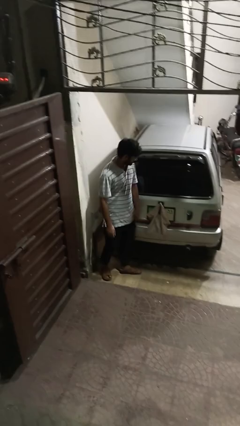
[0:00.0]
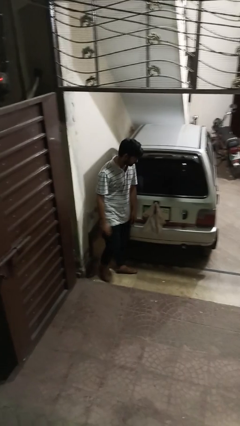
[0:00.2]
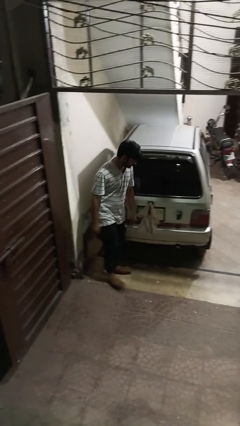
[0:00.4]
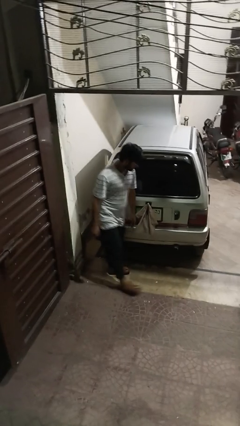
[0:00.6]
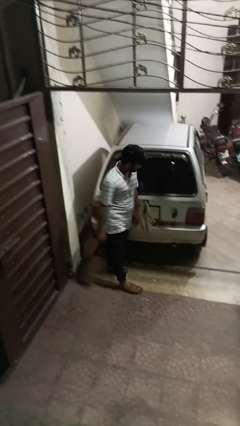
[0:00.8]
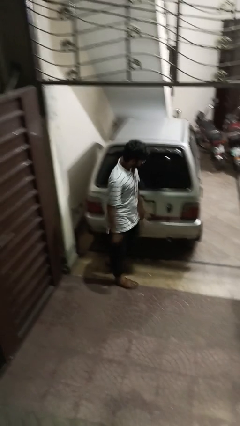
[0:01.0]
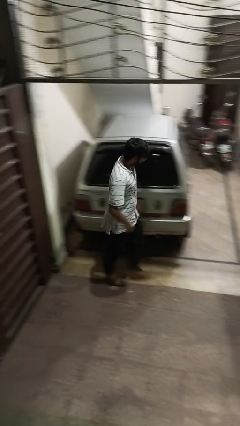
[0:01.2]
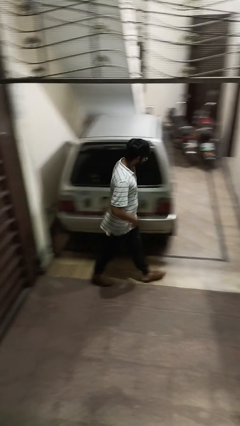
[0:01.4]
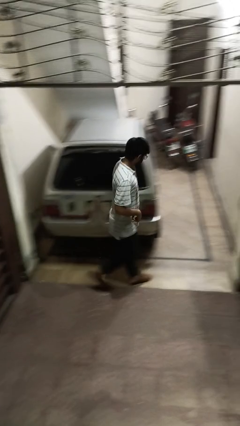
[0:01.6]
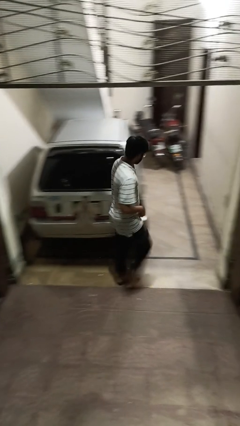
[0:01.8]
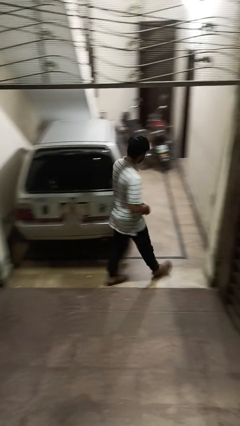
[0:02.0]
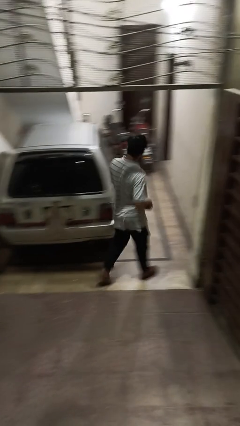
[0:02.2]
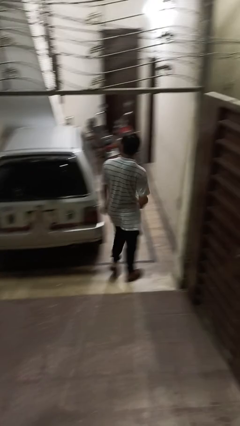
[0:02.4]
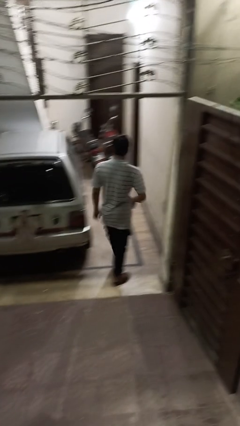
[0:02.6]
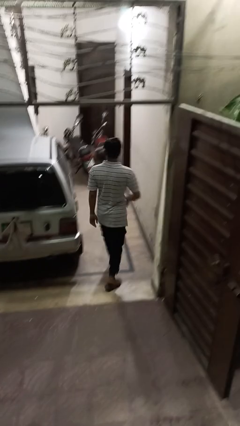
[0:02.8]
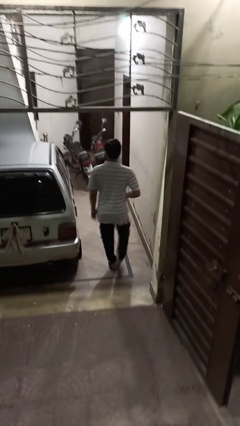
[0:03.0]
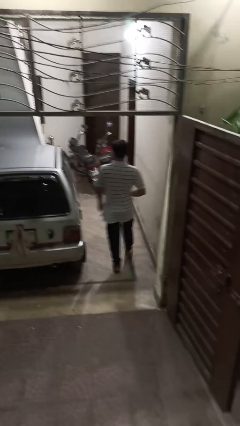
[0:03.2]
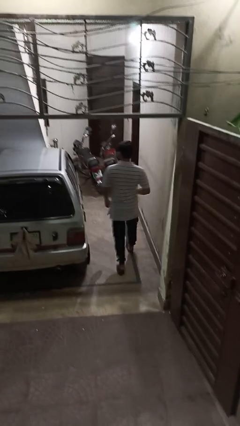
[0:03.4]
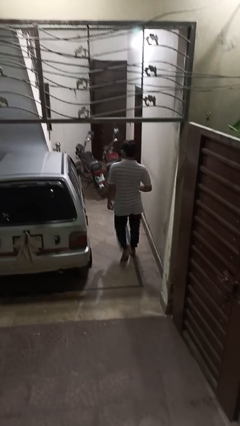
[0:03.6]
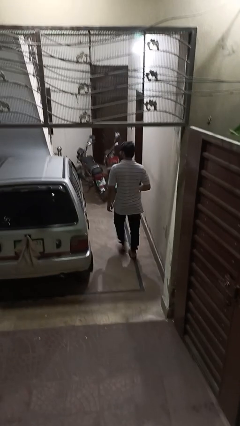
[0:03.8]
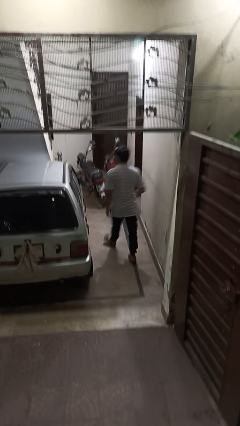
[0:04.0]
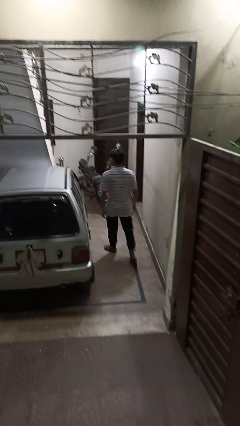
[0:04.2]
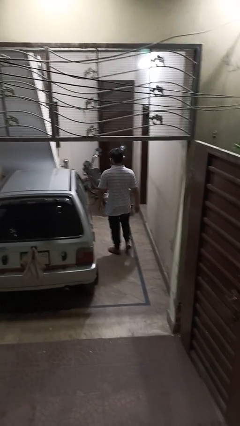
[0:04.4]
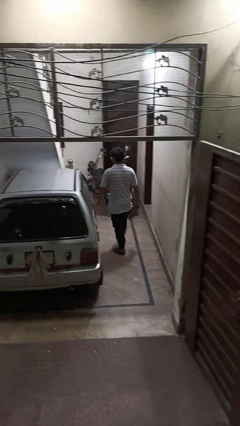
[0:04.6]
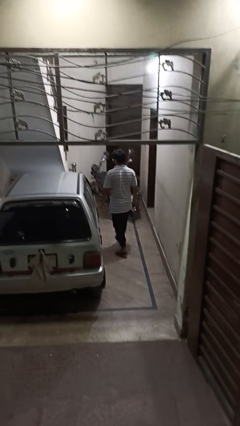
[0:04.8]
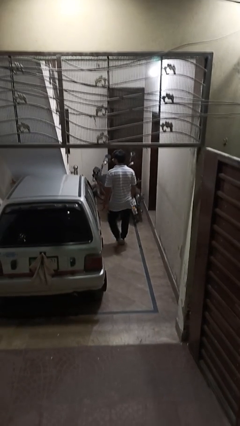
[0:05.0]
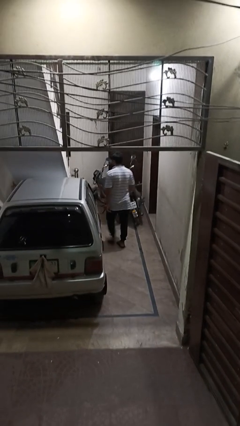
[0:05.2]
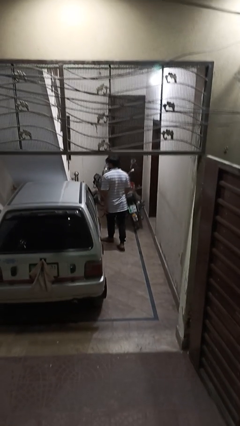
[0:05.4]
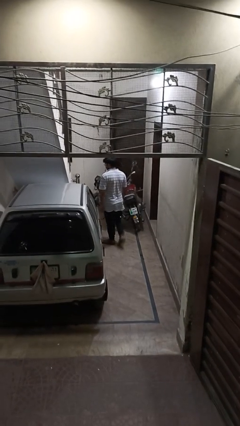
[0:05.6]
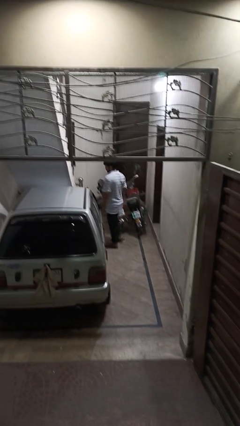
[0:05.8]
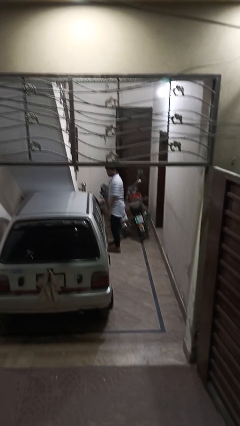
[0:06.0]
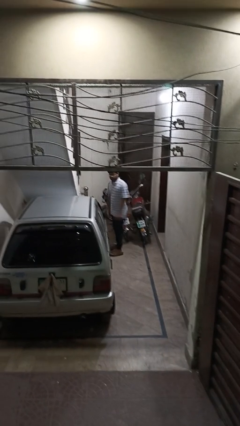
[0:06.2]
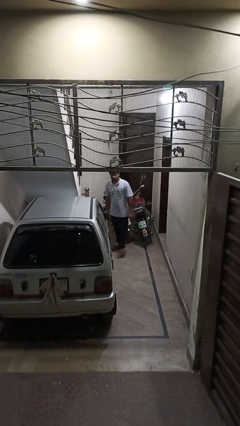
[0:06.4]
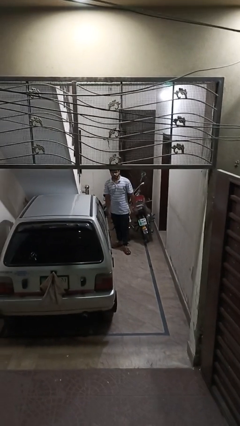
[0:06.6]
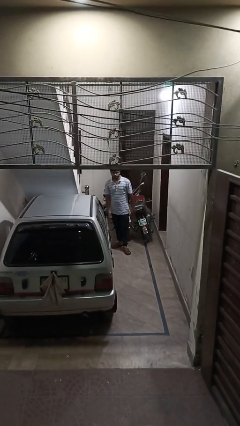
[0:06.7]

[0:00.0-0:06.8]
person walks around car

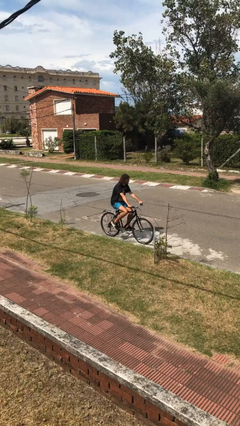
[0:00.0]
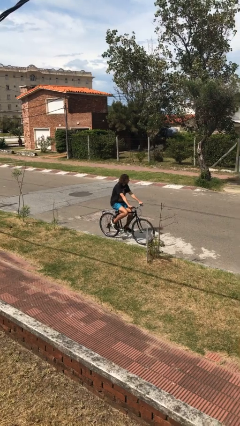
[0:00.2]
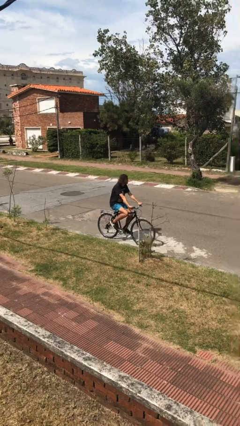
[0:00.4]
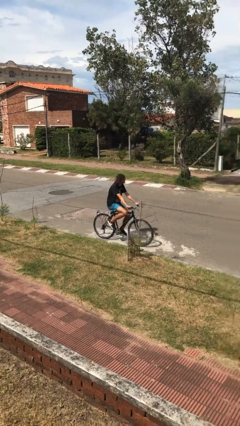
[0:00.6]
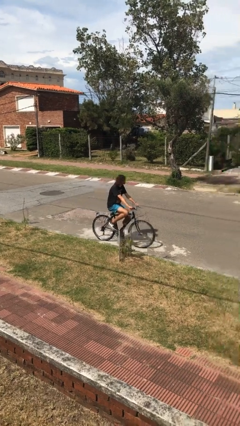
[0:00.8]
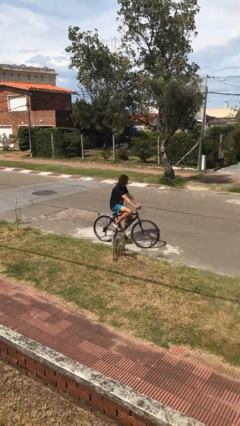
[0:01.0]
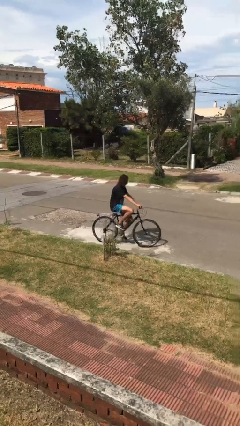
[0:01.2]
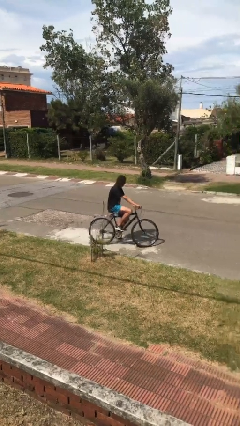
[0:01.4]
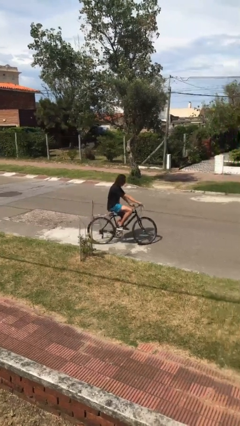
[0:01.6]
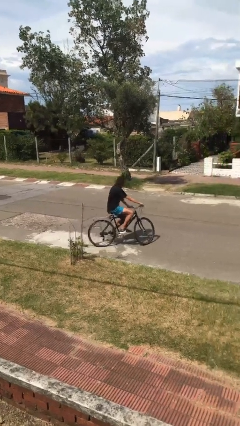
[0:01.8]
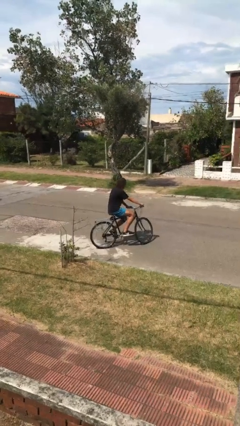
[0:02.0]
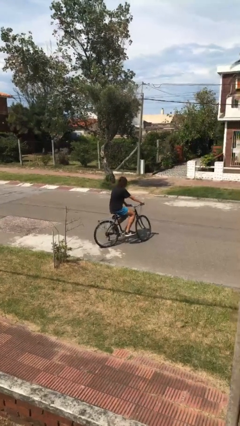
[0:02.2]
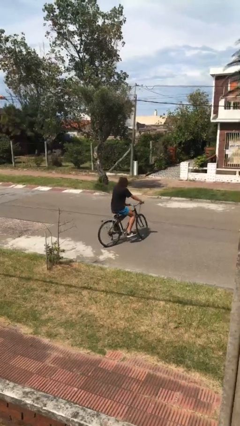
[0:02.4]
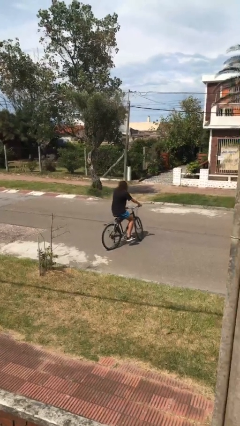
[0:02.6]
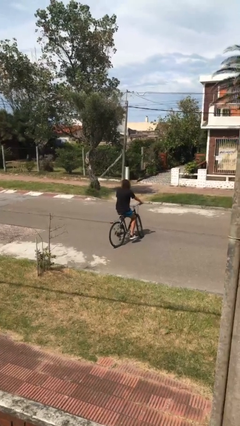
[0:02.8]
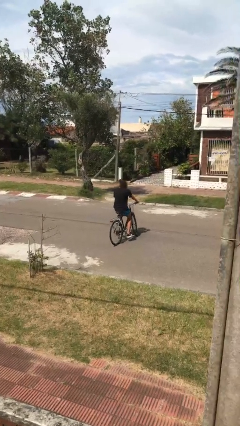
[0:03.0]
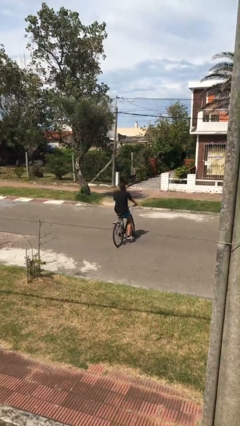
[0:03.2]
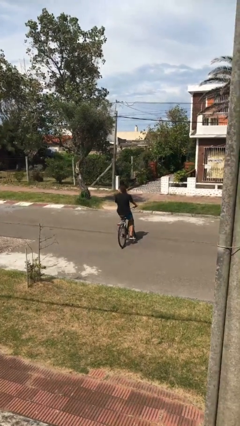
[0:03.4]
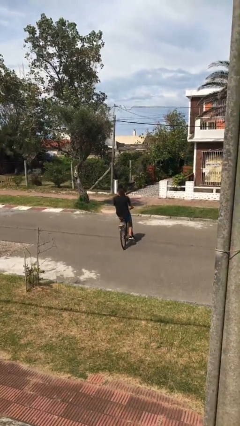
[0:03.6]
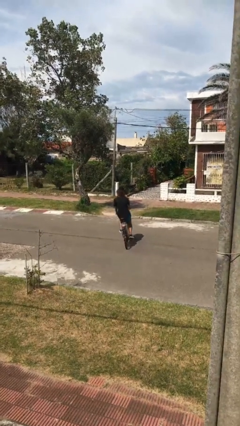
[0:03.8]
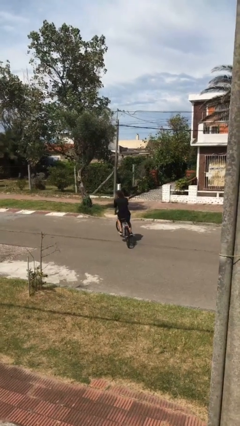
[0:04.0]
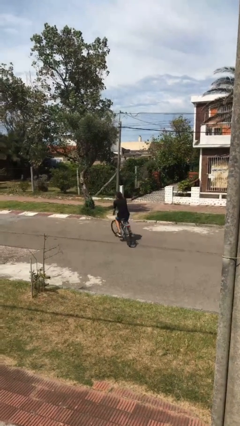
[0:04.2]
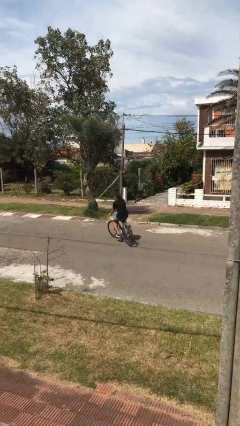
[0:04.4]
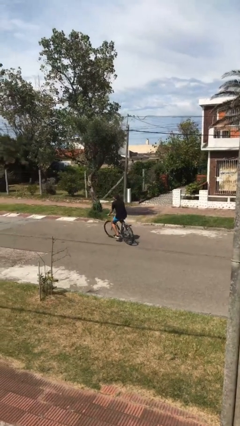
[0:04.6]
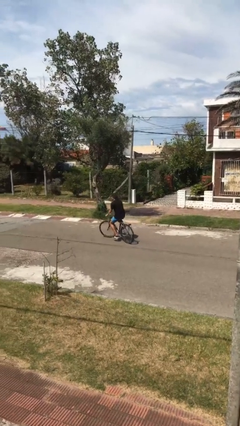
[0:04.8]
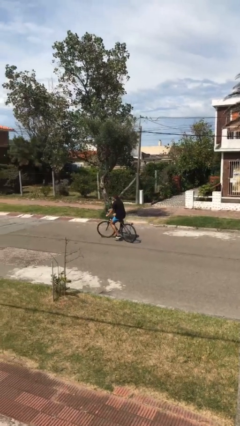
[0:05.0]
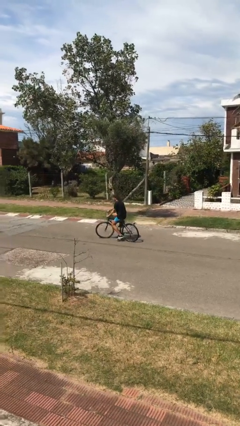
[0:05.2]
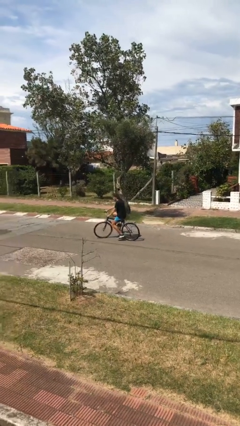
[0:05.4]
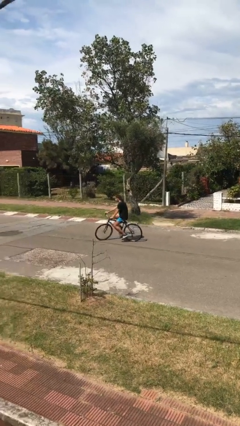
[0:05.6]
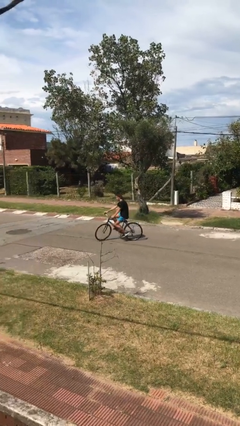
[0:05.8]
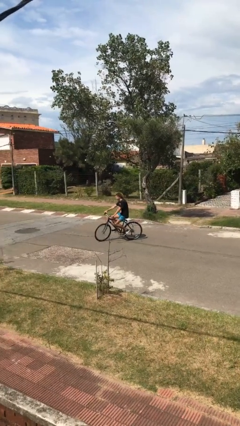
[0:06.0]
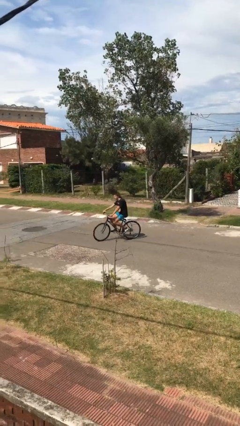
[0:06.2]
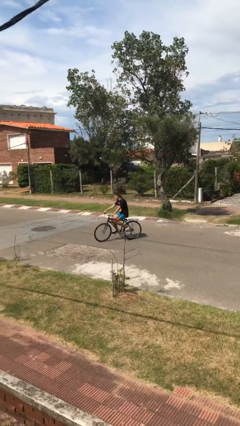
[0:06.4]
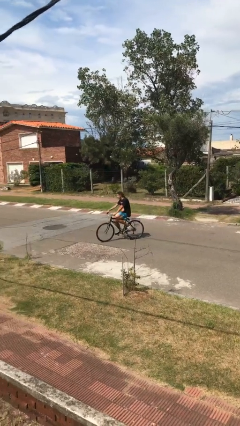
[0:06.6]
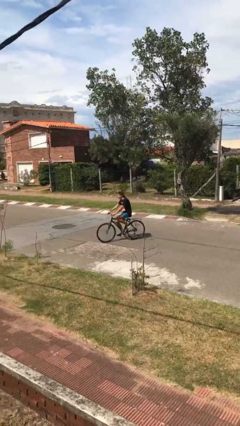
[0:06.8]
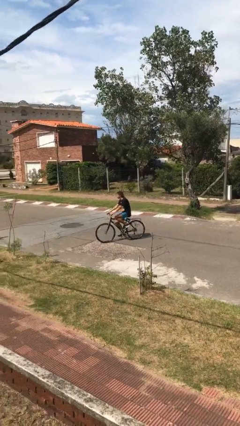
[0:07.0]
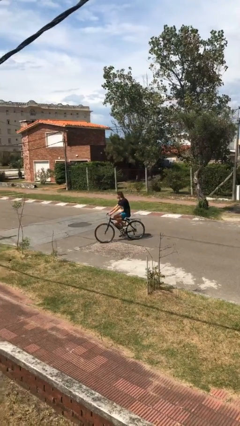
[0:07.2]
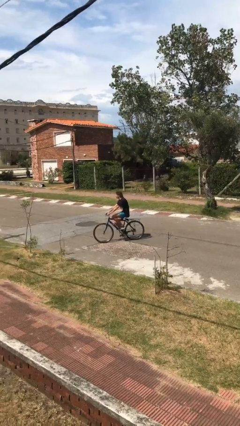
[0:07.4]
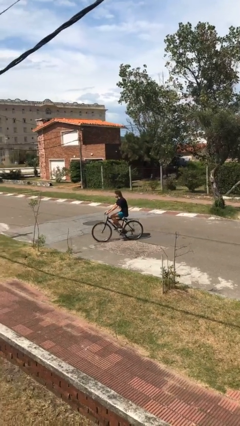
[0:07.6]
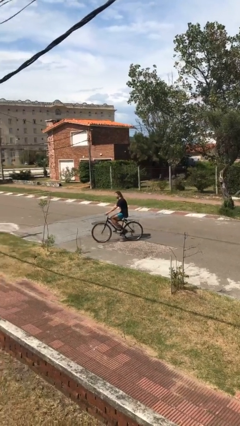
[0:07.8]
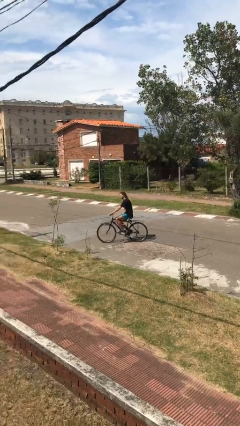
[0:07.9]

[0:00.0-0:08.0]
person rides bicycle

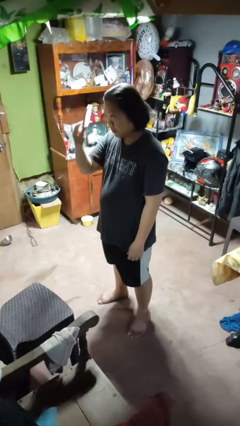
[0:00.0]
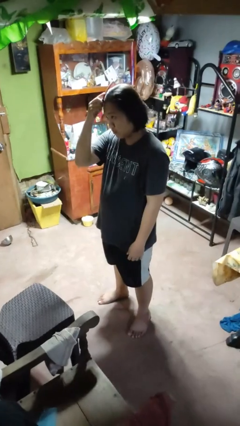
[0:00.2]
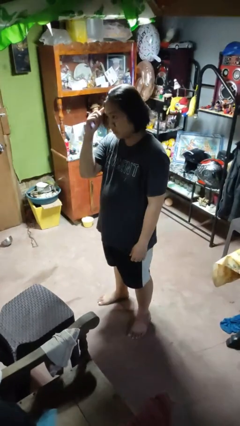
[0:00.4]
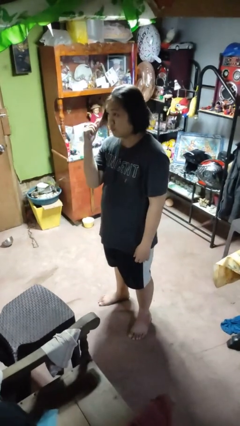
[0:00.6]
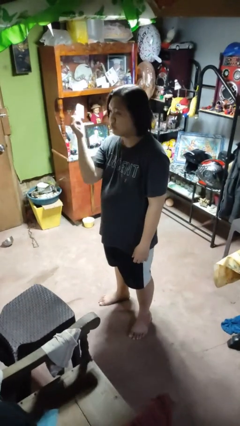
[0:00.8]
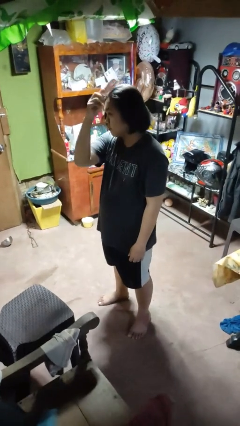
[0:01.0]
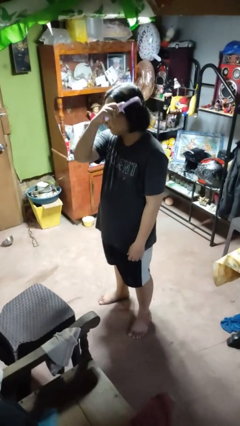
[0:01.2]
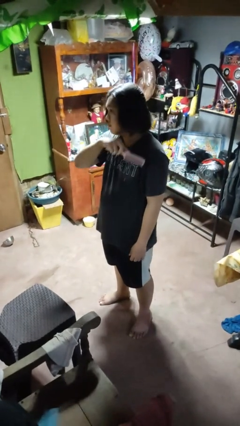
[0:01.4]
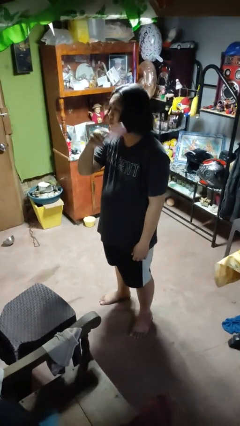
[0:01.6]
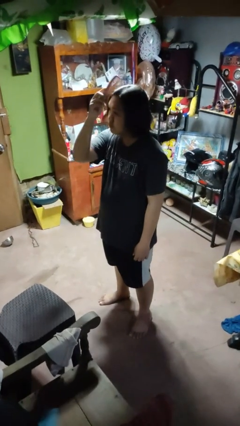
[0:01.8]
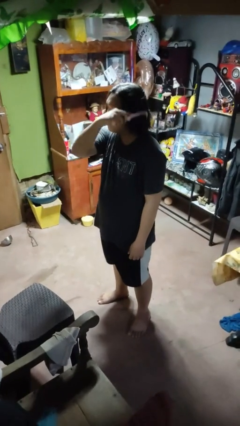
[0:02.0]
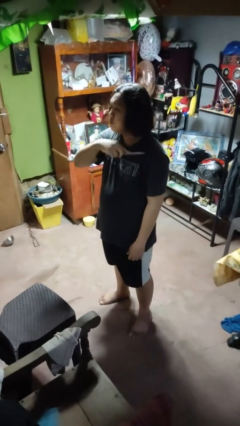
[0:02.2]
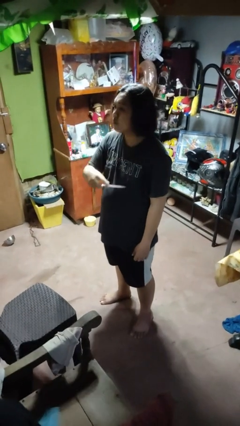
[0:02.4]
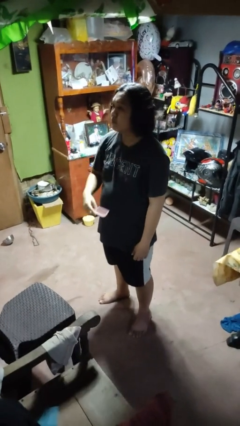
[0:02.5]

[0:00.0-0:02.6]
person brushes hair

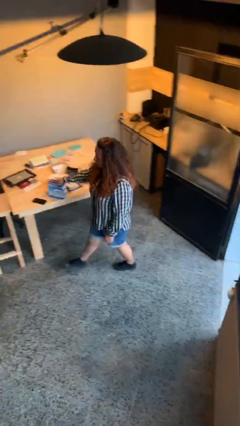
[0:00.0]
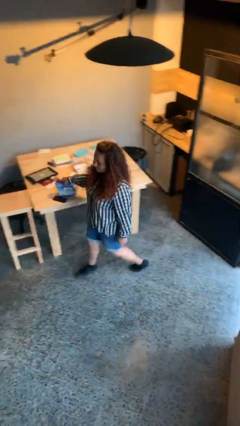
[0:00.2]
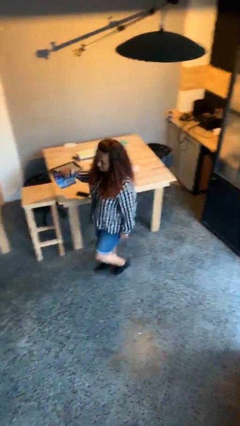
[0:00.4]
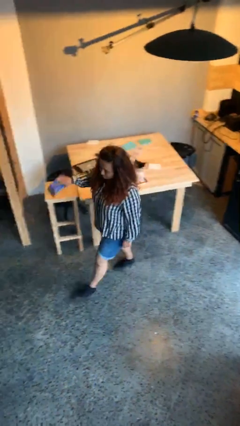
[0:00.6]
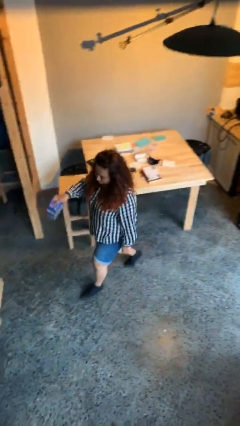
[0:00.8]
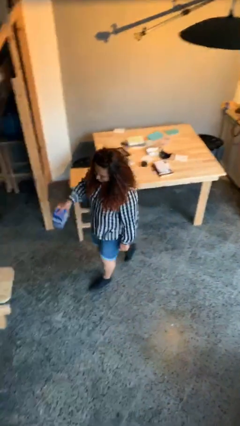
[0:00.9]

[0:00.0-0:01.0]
person picks up object from table
